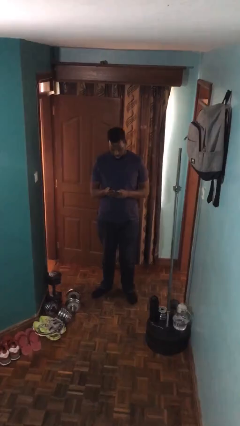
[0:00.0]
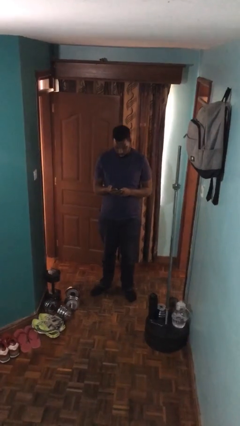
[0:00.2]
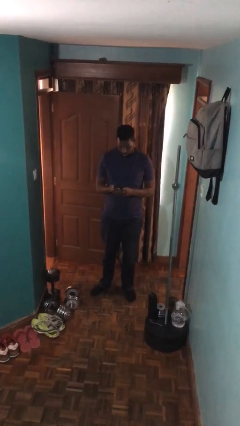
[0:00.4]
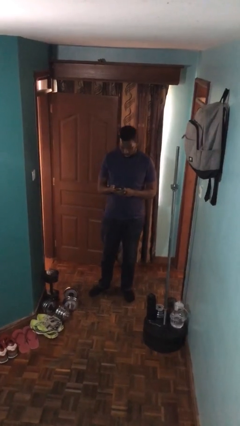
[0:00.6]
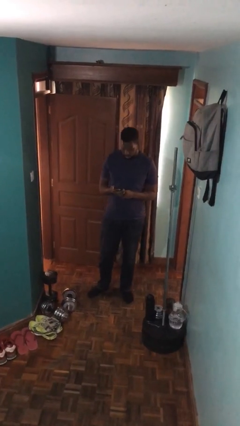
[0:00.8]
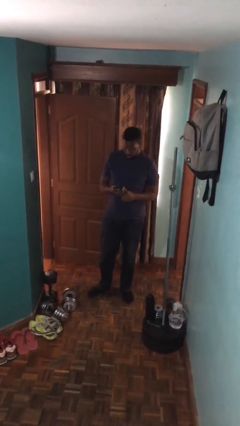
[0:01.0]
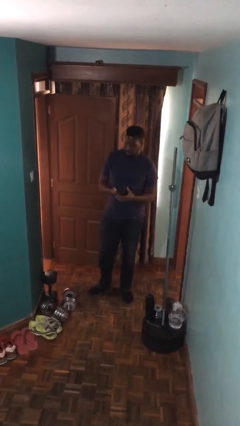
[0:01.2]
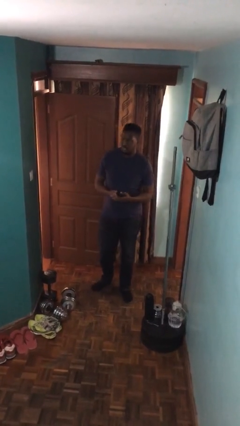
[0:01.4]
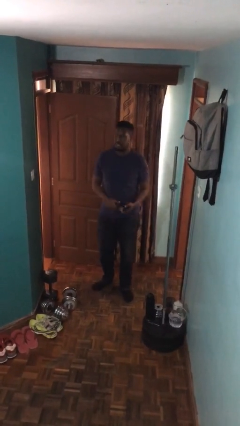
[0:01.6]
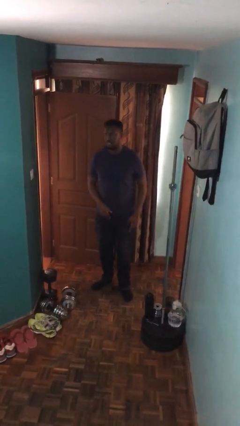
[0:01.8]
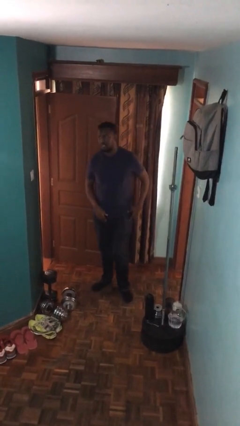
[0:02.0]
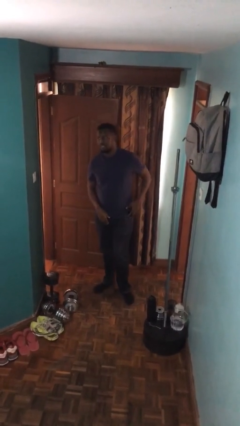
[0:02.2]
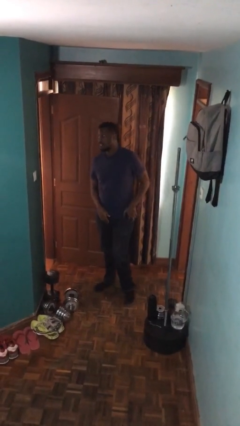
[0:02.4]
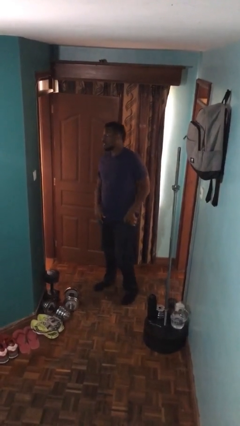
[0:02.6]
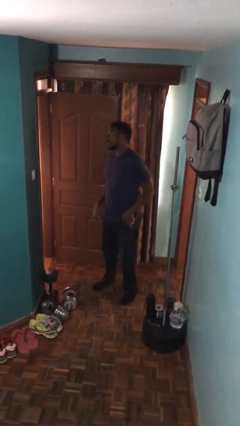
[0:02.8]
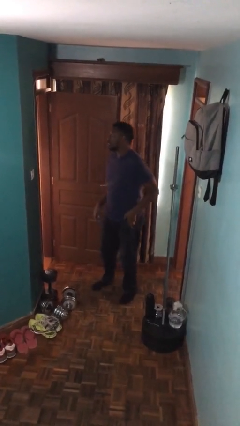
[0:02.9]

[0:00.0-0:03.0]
person puts phone into pocket

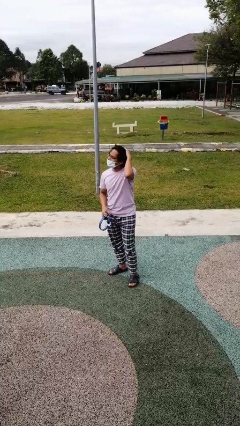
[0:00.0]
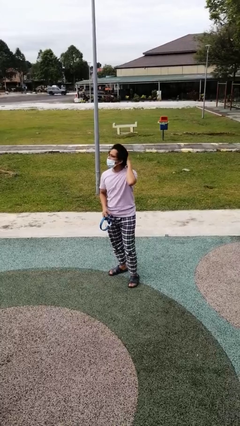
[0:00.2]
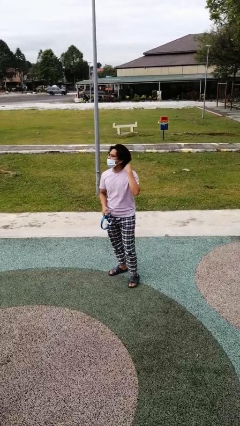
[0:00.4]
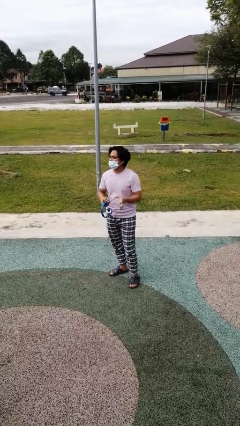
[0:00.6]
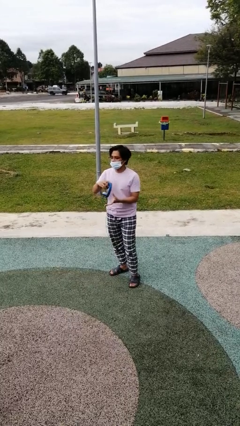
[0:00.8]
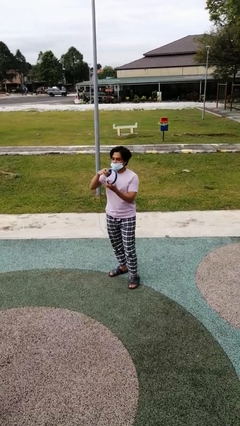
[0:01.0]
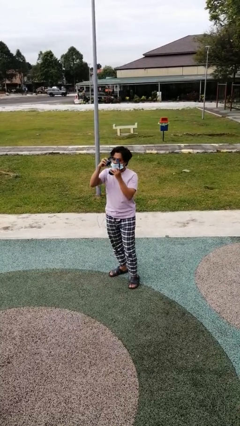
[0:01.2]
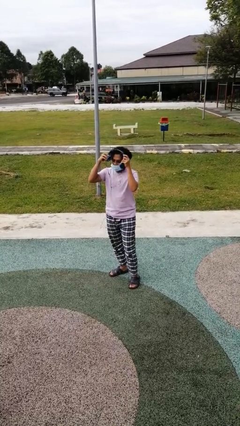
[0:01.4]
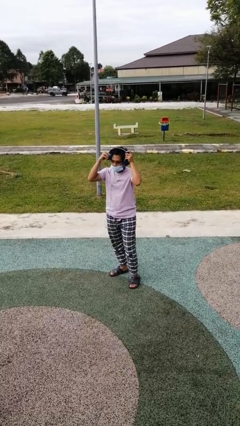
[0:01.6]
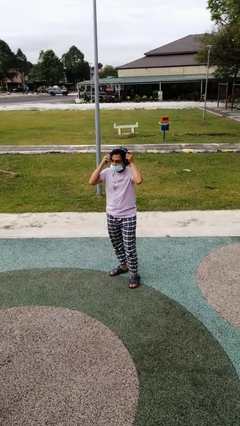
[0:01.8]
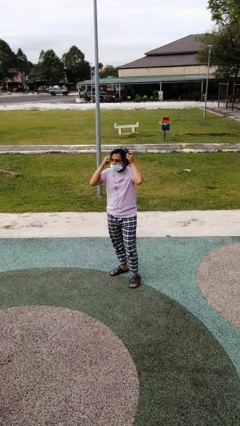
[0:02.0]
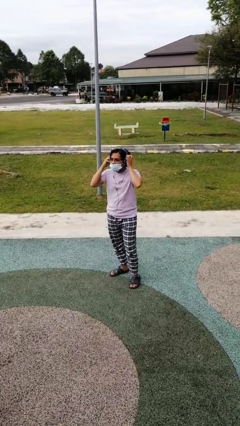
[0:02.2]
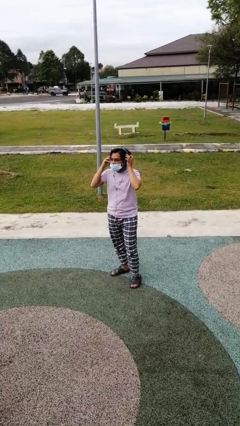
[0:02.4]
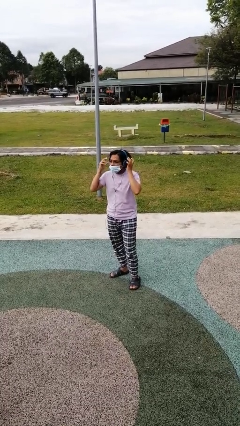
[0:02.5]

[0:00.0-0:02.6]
person puts on headphones

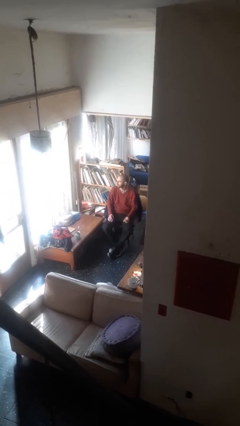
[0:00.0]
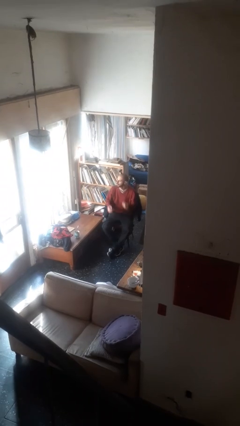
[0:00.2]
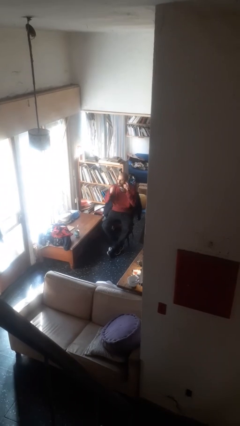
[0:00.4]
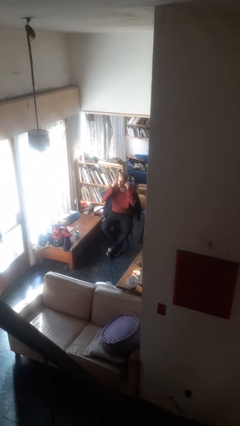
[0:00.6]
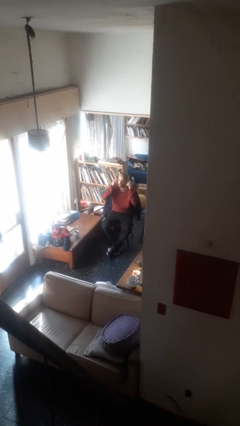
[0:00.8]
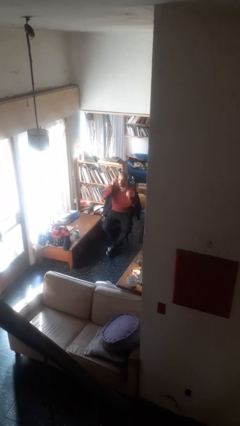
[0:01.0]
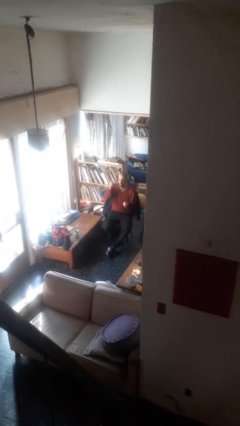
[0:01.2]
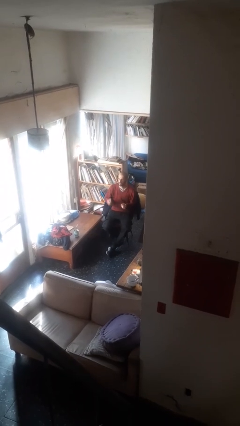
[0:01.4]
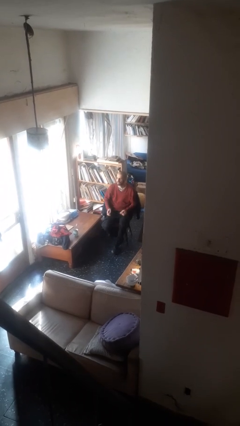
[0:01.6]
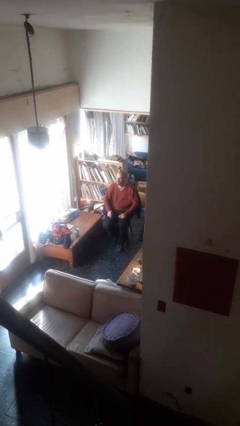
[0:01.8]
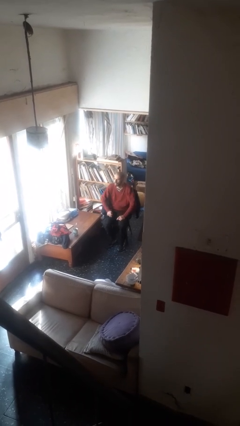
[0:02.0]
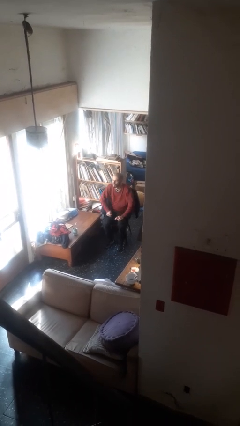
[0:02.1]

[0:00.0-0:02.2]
person takes off headphones

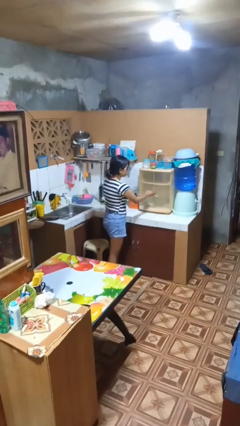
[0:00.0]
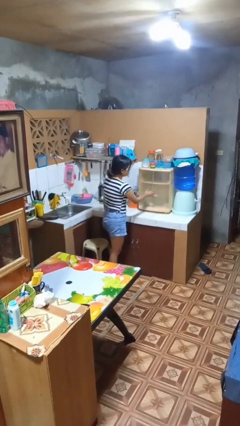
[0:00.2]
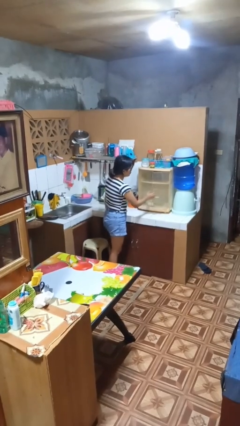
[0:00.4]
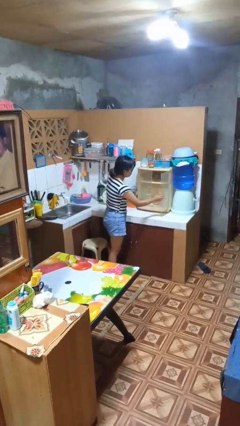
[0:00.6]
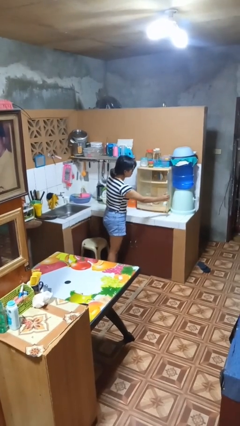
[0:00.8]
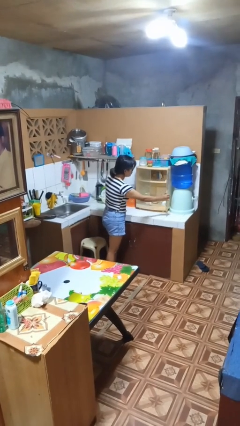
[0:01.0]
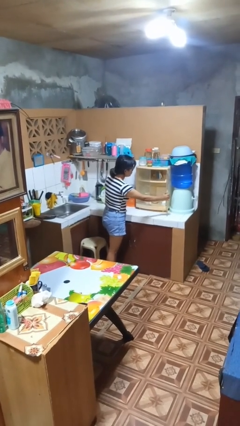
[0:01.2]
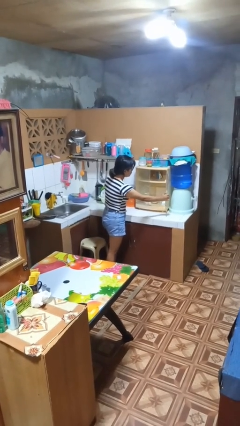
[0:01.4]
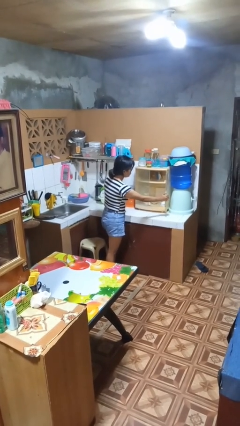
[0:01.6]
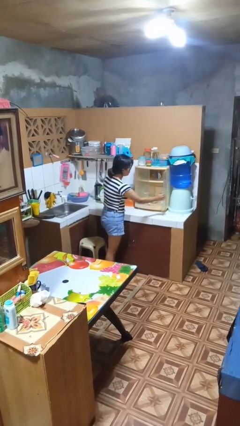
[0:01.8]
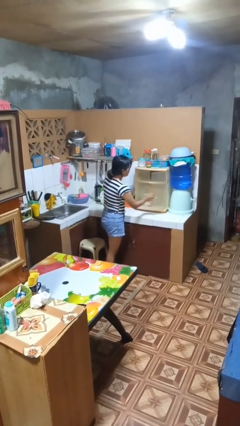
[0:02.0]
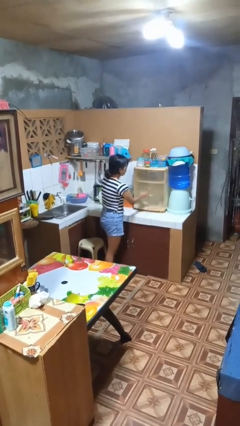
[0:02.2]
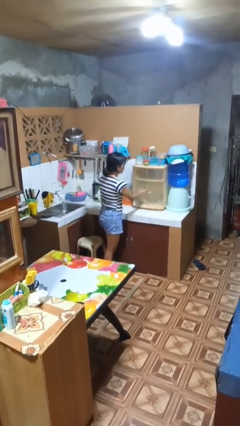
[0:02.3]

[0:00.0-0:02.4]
person opens cabinet

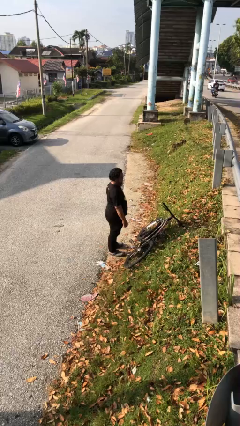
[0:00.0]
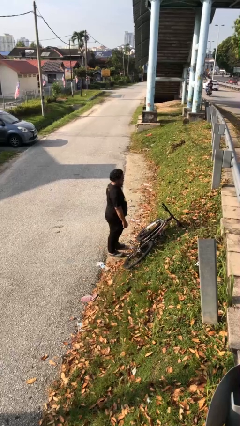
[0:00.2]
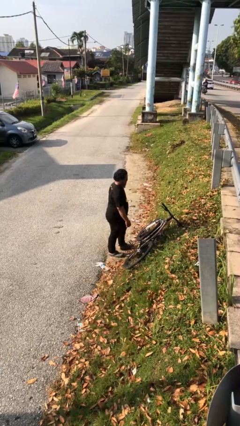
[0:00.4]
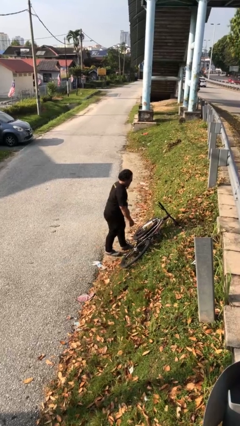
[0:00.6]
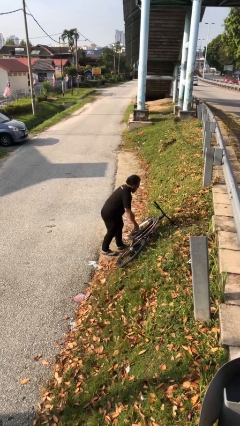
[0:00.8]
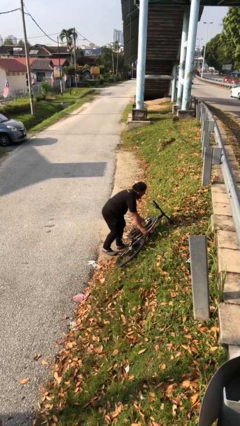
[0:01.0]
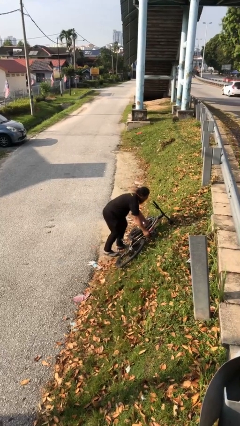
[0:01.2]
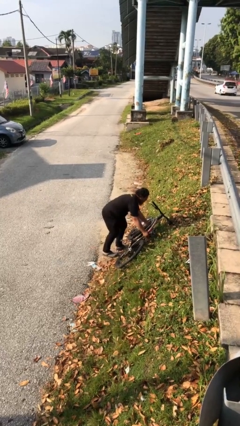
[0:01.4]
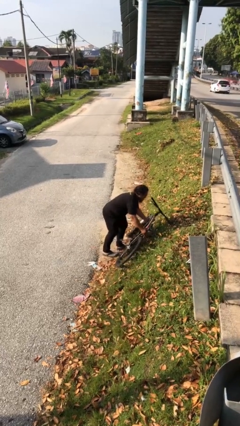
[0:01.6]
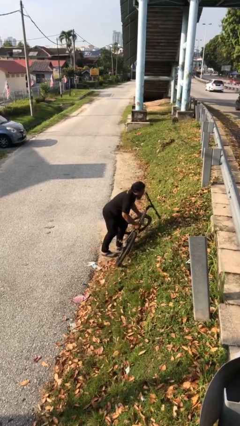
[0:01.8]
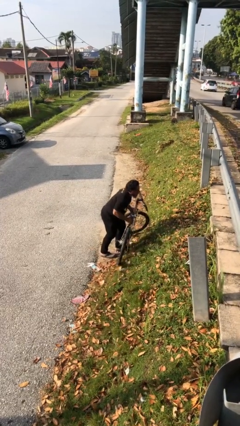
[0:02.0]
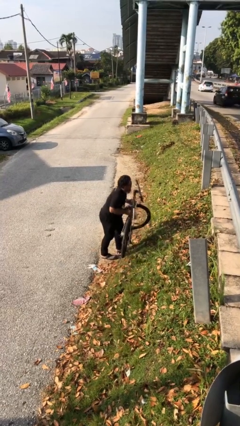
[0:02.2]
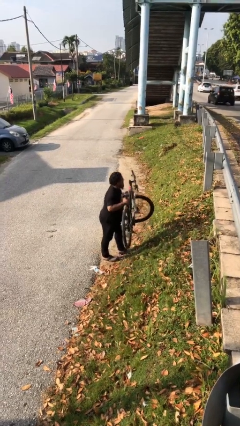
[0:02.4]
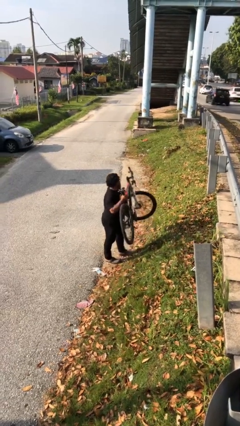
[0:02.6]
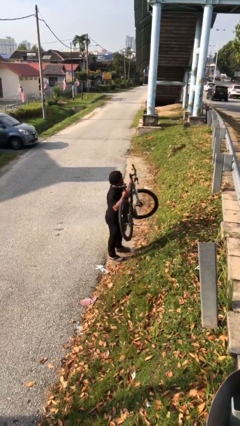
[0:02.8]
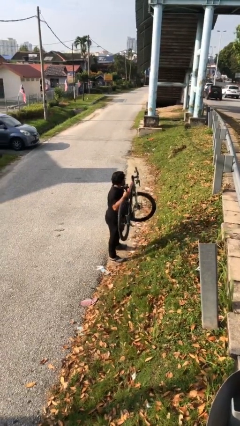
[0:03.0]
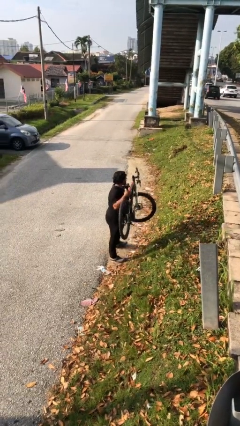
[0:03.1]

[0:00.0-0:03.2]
person picks up object from floor

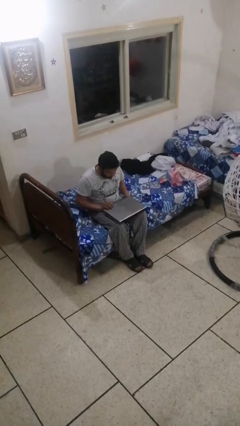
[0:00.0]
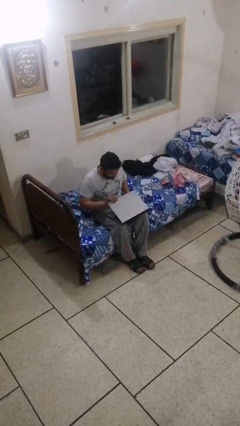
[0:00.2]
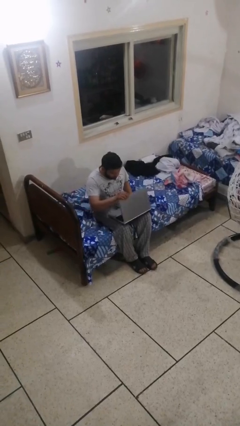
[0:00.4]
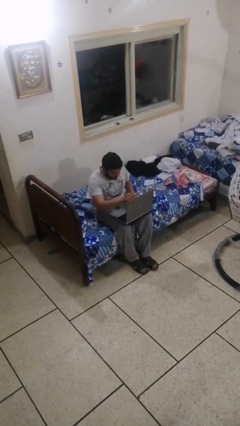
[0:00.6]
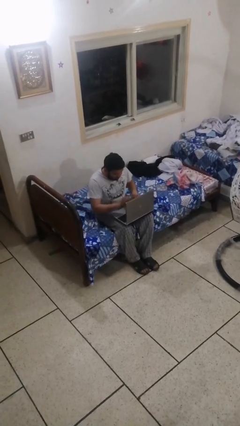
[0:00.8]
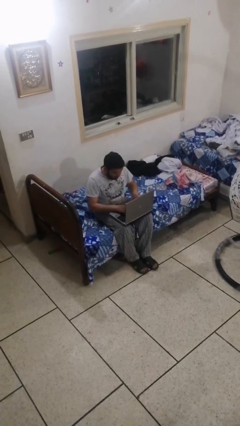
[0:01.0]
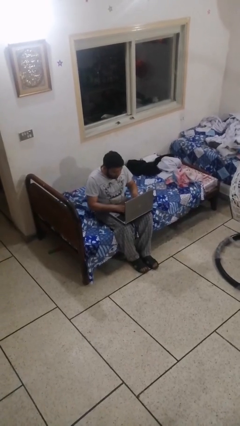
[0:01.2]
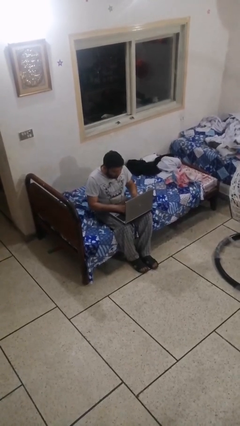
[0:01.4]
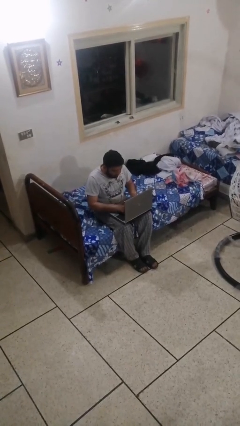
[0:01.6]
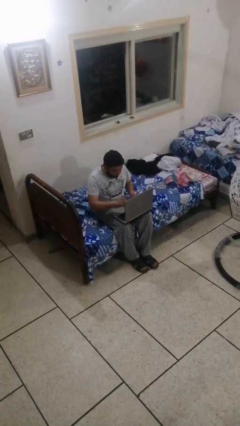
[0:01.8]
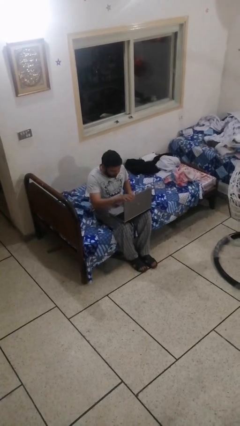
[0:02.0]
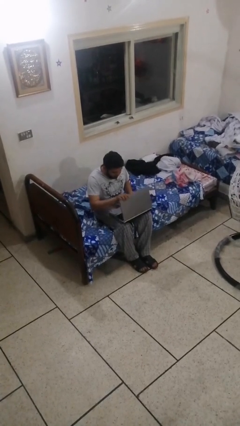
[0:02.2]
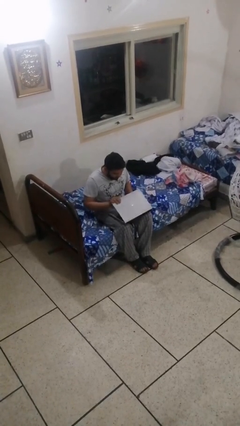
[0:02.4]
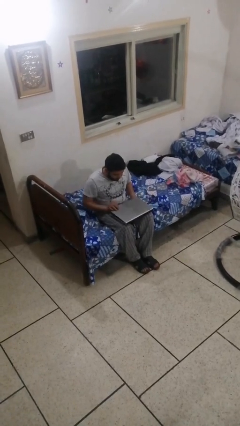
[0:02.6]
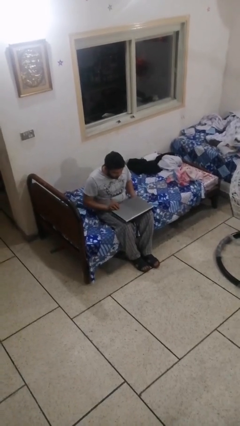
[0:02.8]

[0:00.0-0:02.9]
person interacts with laptop

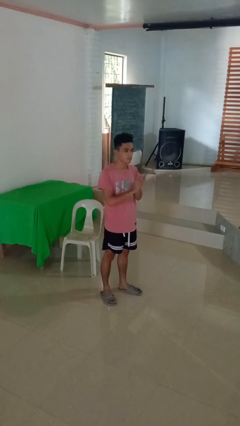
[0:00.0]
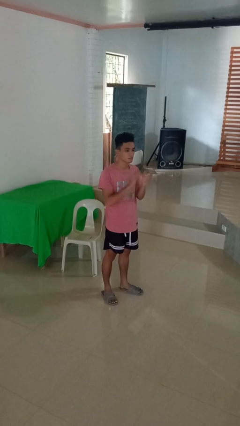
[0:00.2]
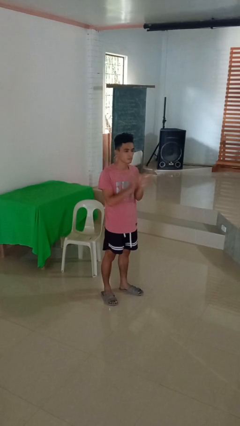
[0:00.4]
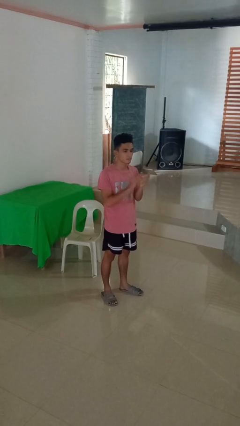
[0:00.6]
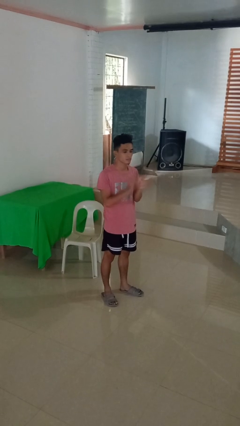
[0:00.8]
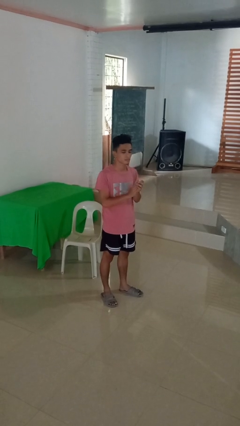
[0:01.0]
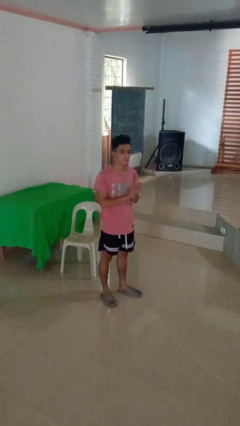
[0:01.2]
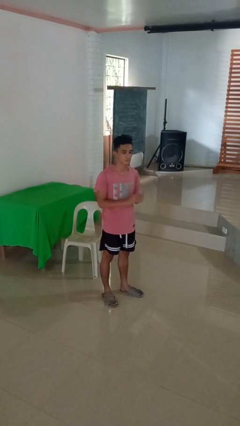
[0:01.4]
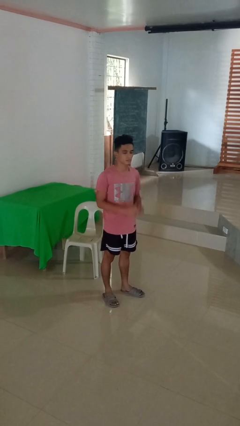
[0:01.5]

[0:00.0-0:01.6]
person claps hands
